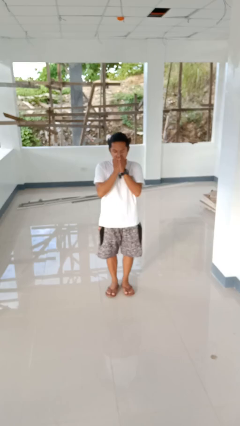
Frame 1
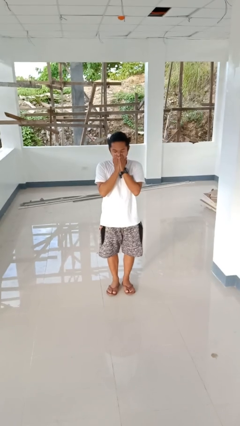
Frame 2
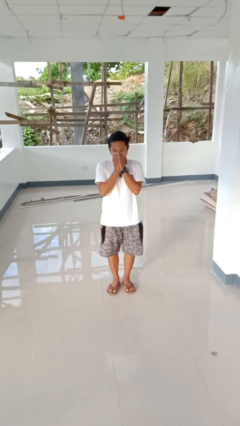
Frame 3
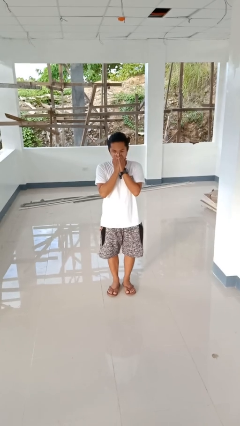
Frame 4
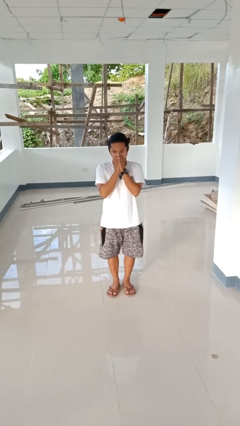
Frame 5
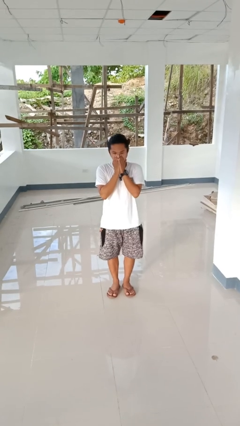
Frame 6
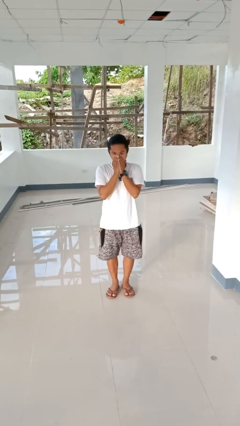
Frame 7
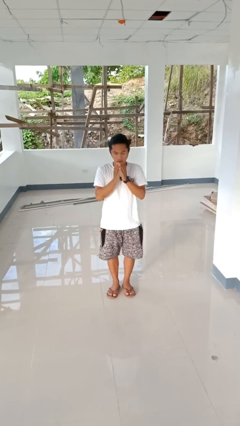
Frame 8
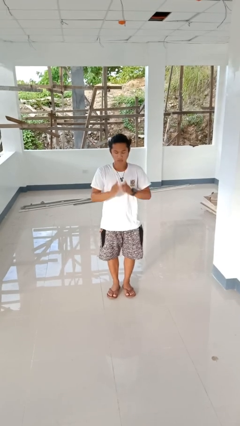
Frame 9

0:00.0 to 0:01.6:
person sneezes into hand

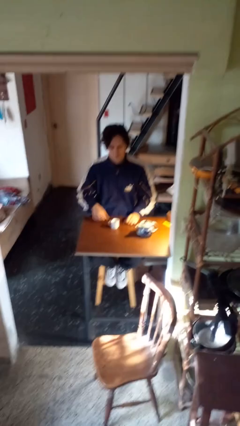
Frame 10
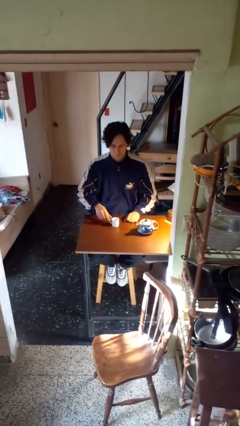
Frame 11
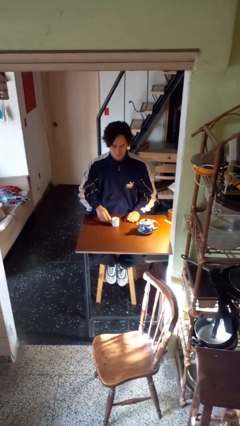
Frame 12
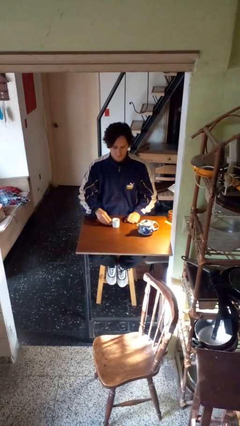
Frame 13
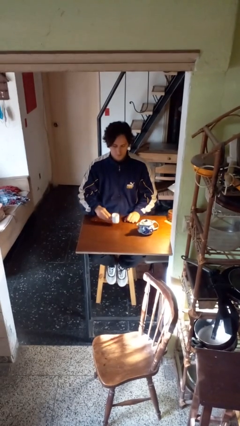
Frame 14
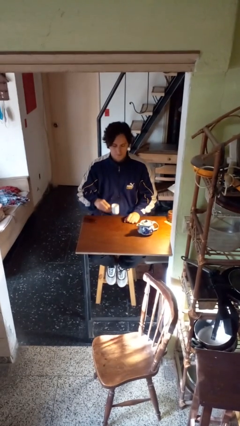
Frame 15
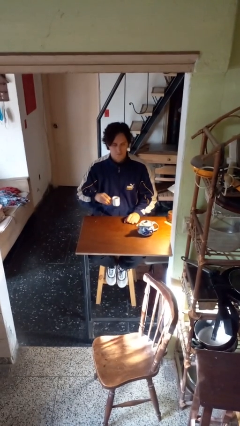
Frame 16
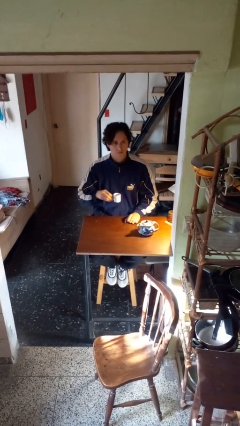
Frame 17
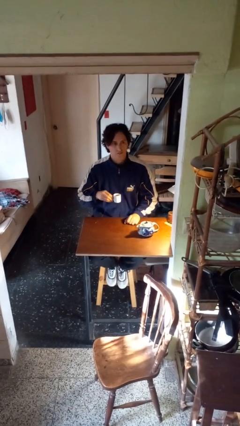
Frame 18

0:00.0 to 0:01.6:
person picks up object from table

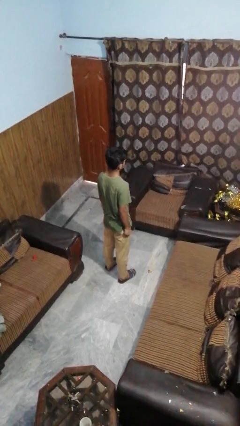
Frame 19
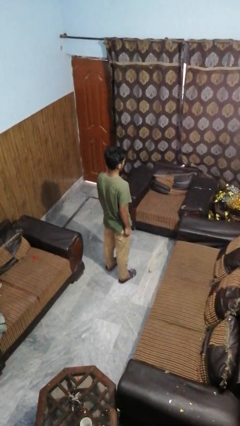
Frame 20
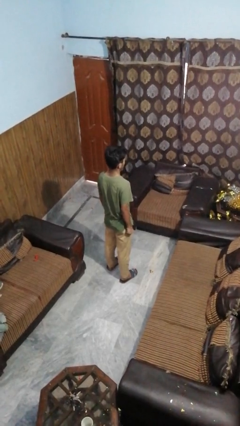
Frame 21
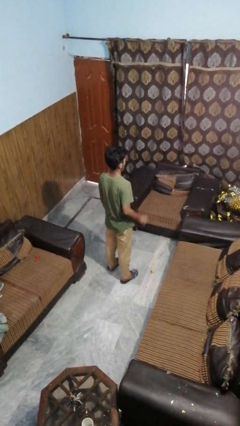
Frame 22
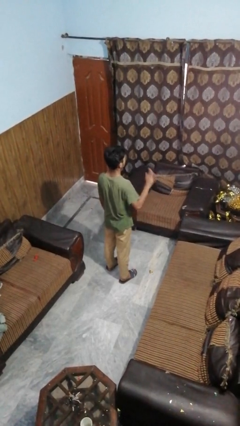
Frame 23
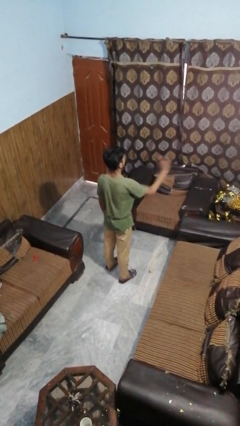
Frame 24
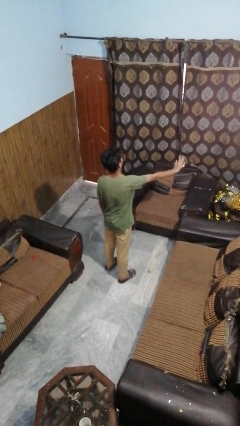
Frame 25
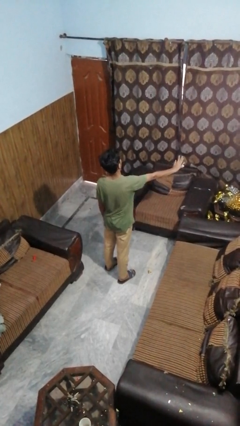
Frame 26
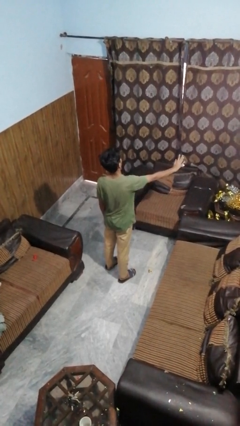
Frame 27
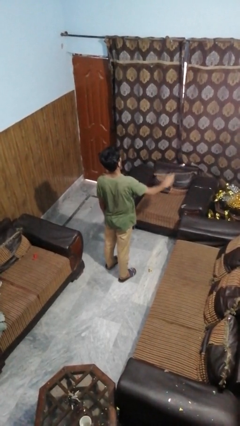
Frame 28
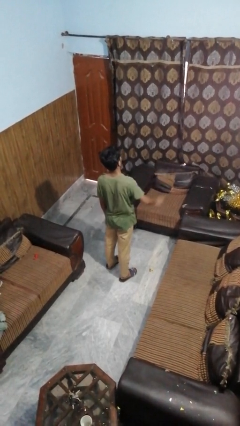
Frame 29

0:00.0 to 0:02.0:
person gestures stop

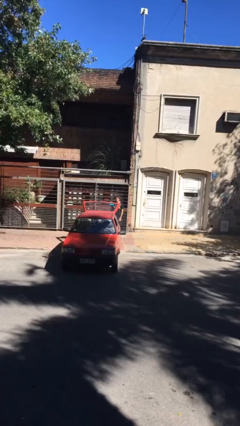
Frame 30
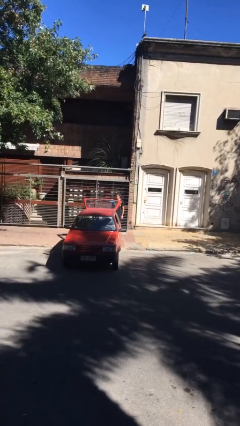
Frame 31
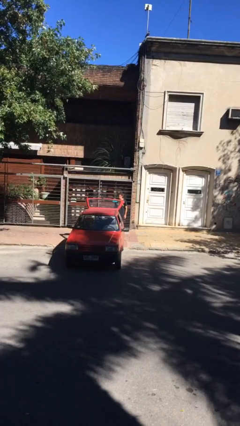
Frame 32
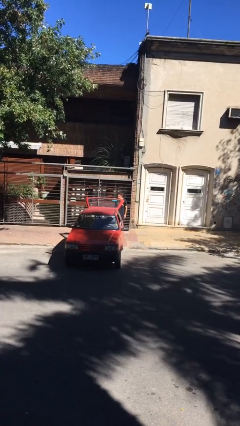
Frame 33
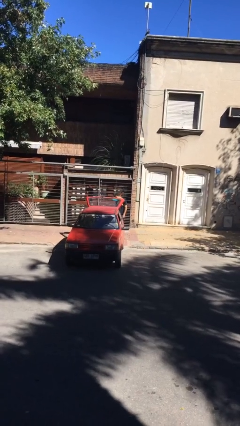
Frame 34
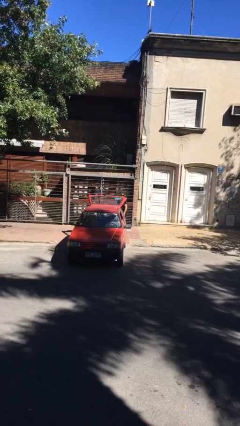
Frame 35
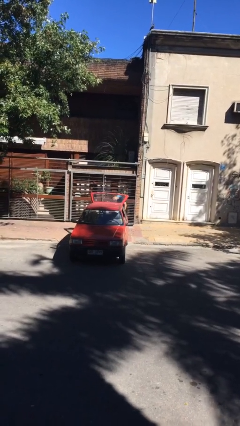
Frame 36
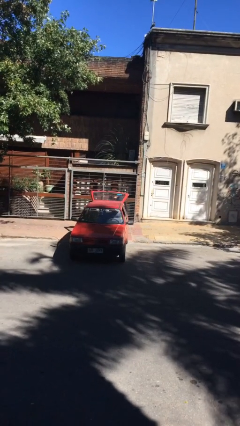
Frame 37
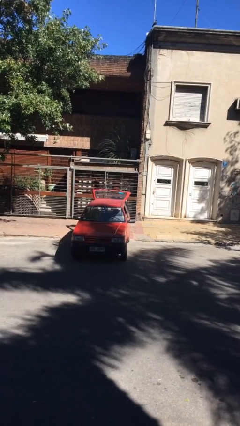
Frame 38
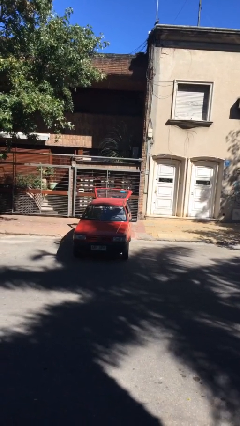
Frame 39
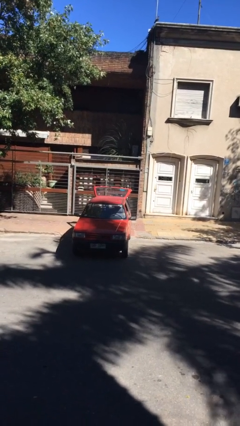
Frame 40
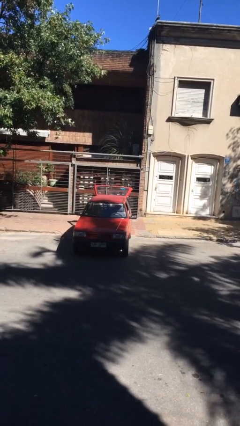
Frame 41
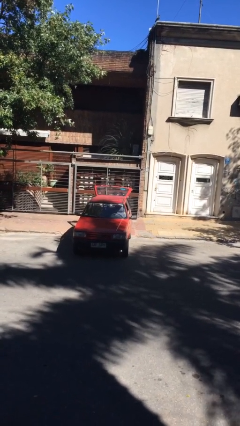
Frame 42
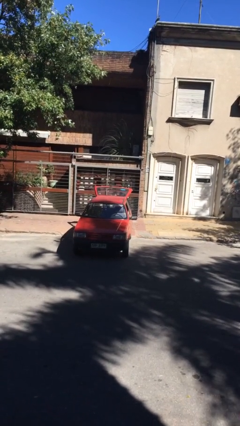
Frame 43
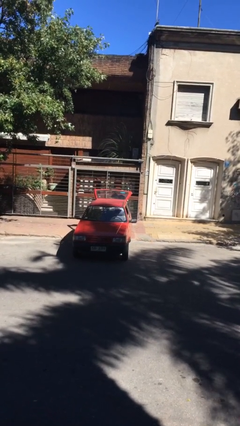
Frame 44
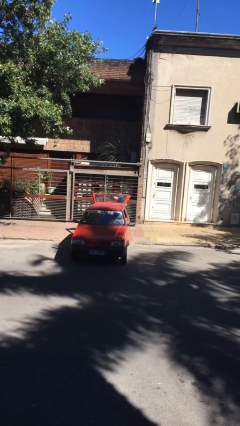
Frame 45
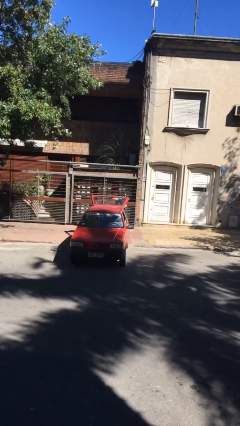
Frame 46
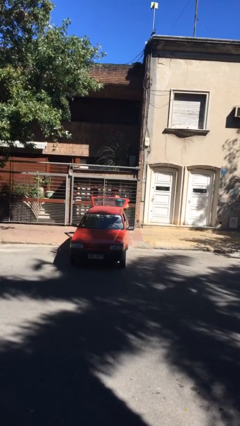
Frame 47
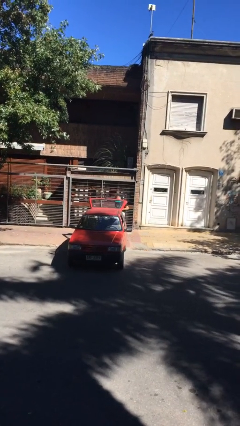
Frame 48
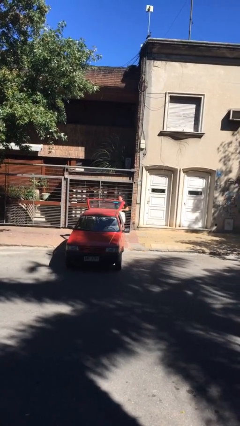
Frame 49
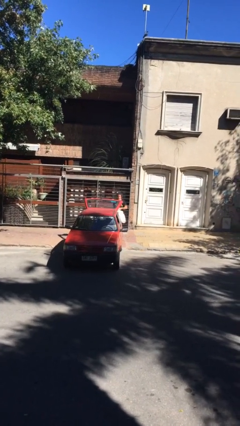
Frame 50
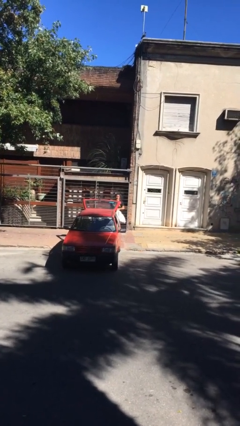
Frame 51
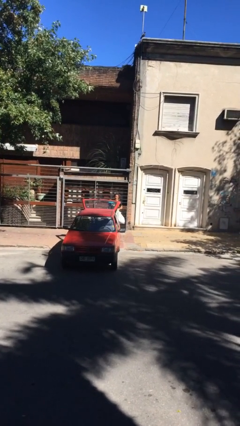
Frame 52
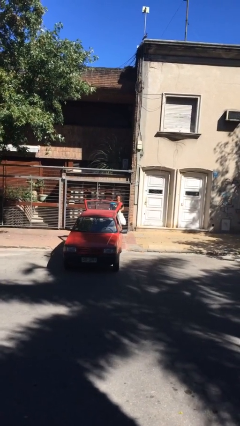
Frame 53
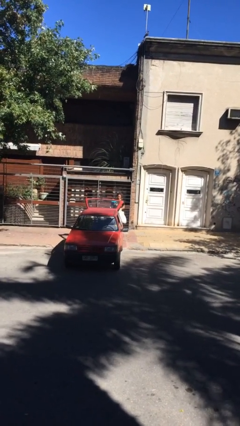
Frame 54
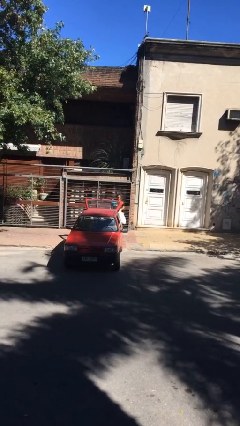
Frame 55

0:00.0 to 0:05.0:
person unloads car

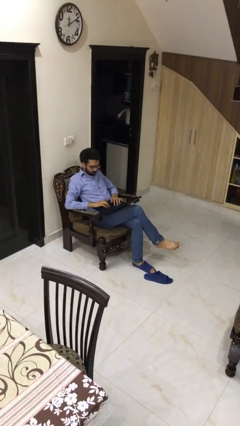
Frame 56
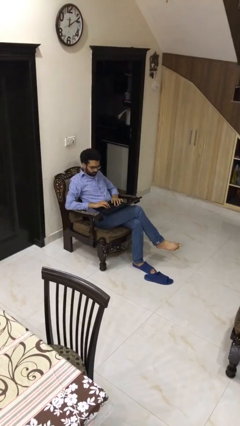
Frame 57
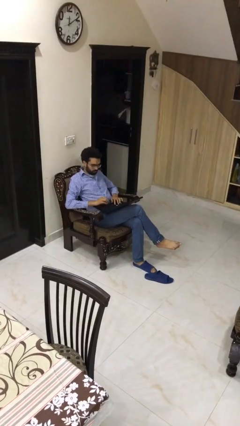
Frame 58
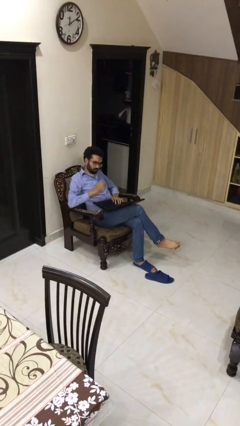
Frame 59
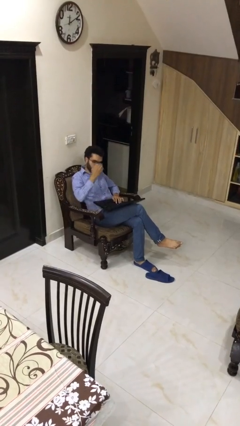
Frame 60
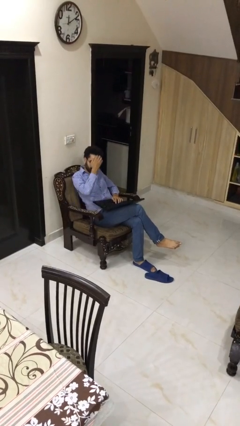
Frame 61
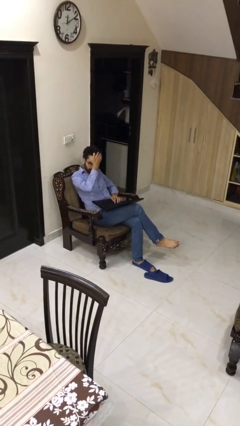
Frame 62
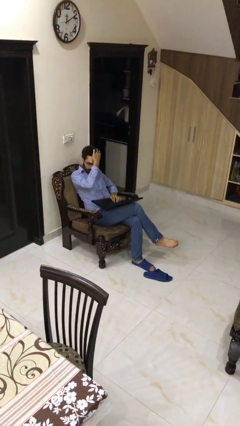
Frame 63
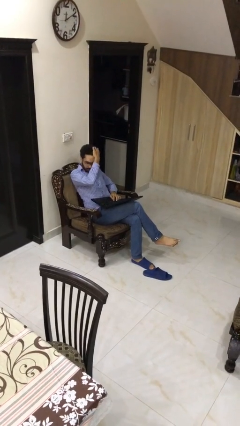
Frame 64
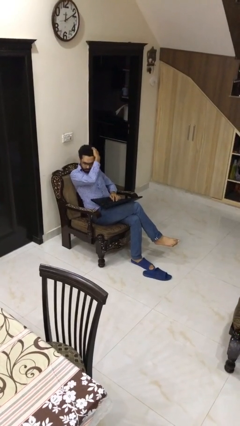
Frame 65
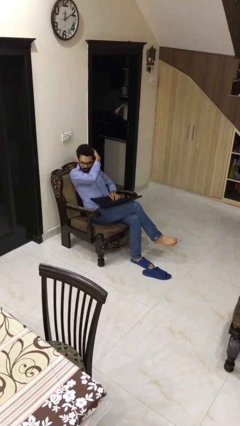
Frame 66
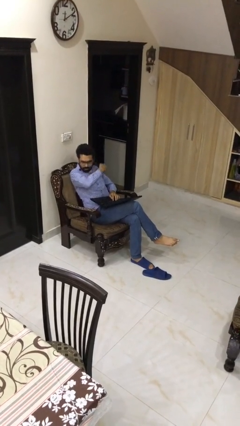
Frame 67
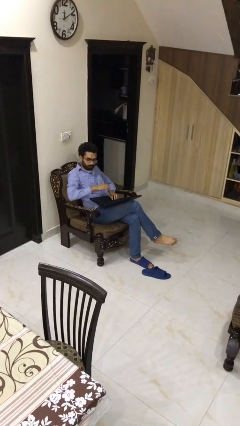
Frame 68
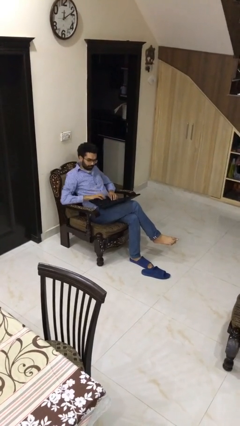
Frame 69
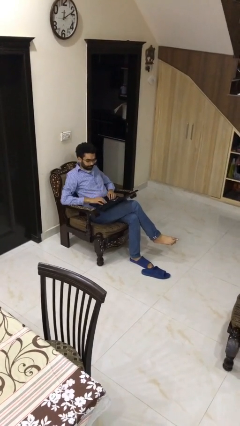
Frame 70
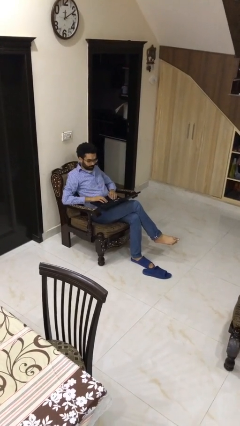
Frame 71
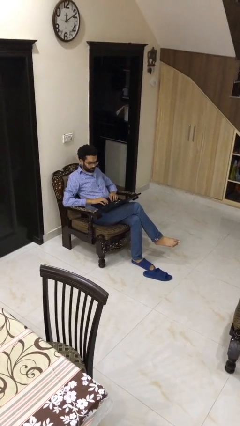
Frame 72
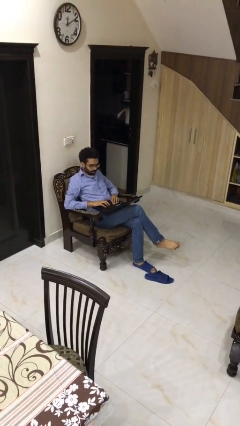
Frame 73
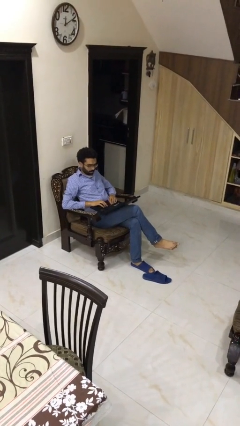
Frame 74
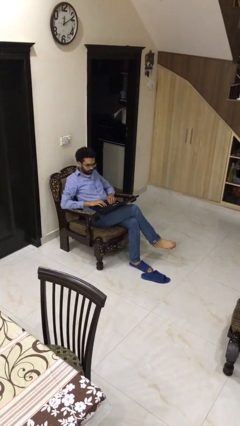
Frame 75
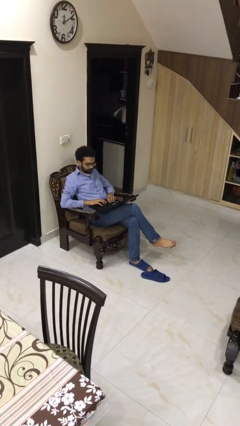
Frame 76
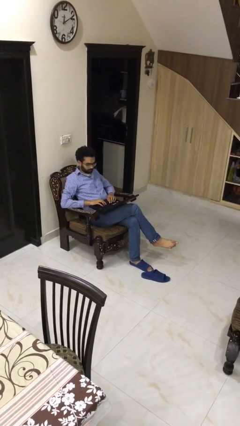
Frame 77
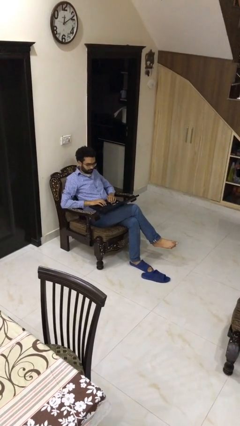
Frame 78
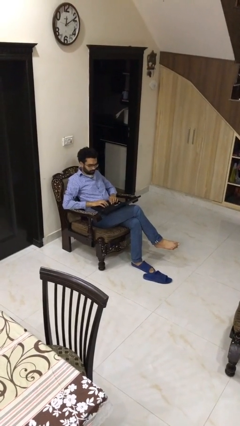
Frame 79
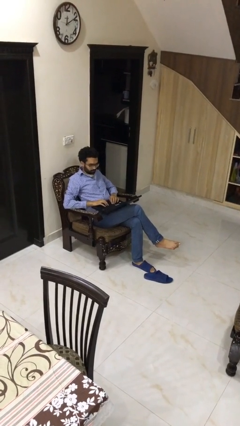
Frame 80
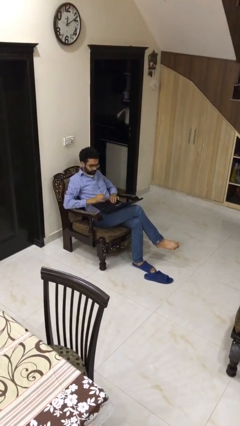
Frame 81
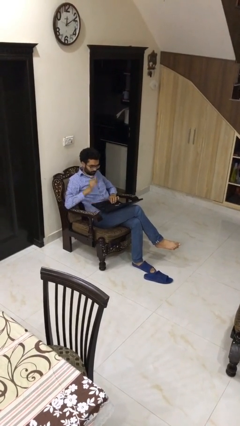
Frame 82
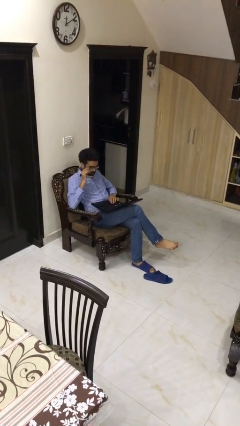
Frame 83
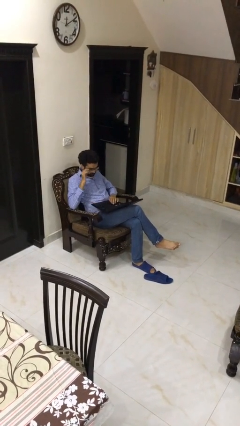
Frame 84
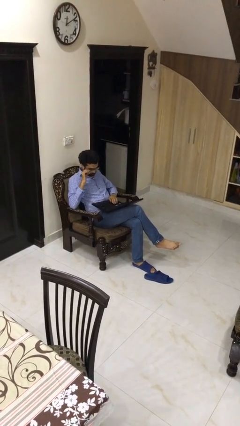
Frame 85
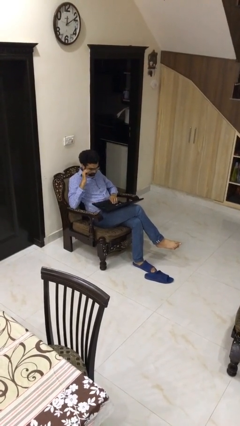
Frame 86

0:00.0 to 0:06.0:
person interacts with laptop

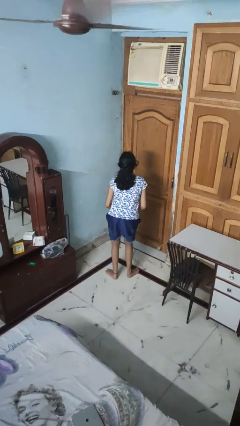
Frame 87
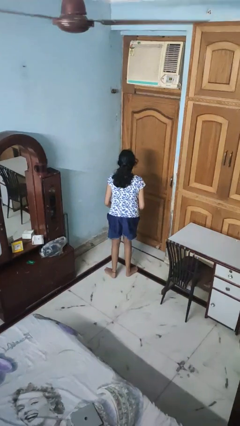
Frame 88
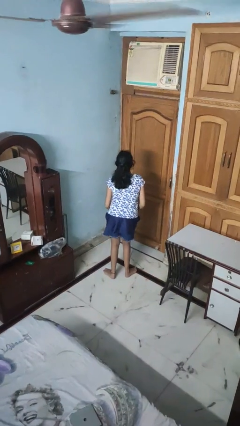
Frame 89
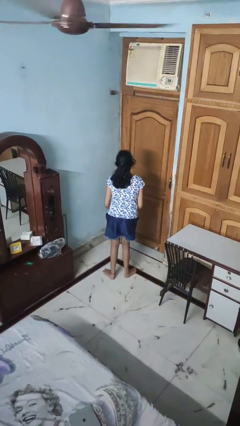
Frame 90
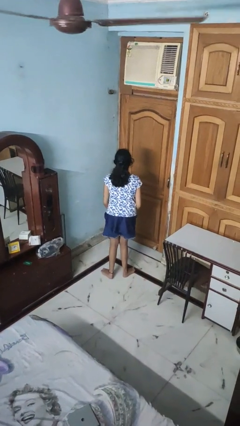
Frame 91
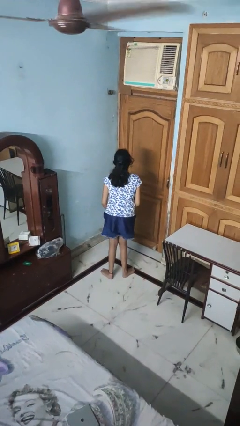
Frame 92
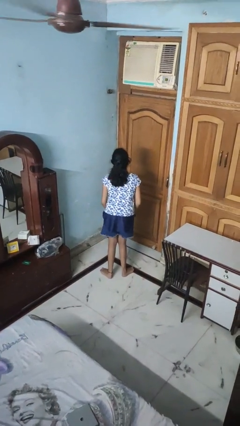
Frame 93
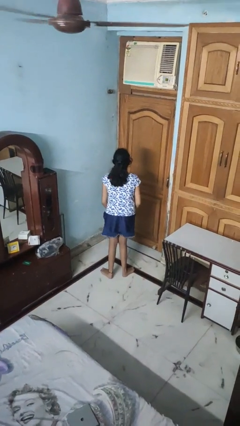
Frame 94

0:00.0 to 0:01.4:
person wiggles hips
